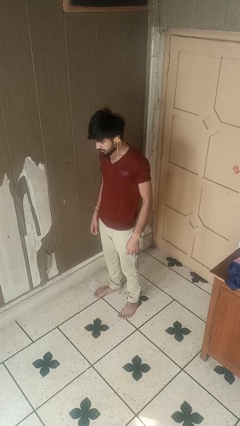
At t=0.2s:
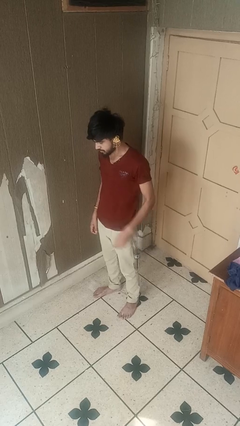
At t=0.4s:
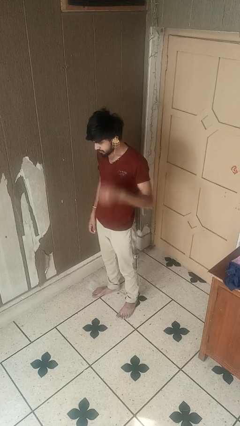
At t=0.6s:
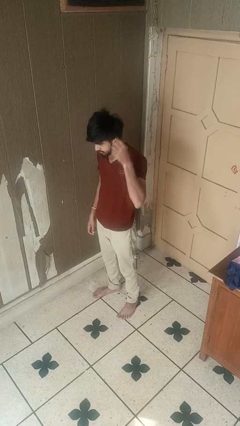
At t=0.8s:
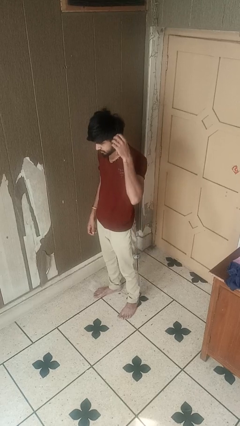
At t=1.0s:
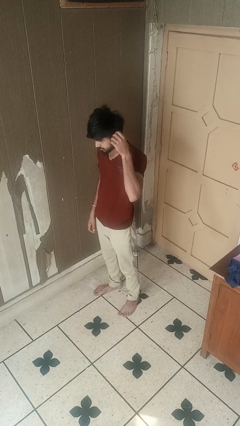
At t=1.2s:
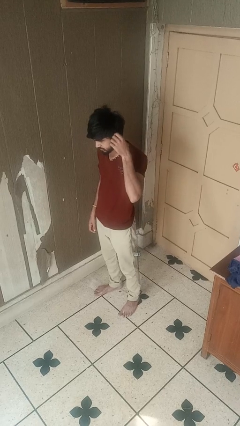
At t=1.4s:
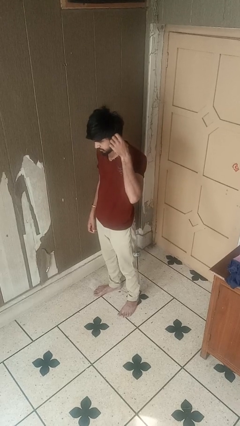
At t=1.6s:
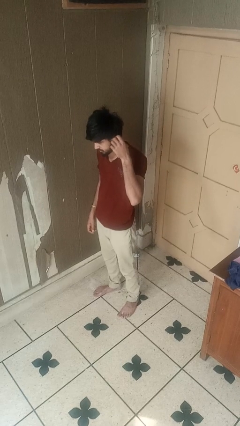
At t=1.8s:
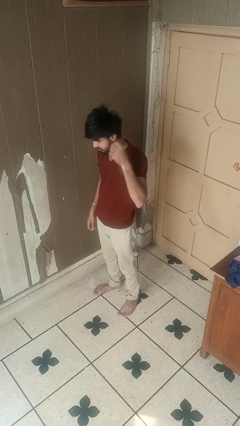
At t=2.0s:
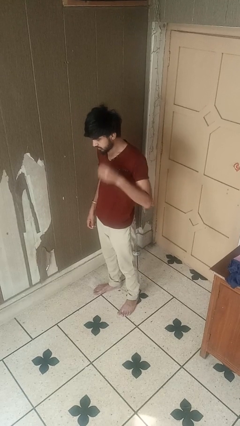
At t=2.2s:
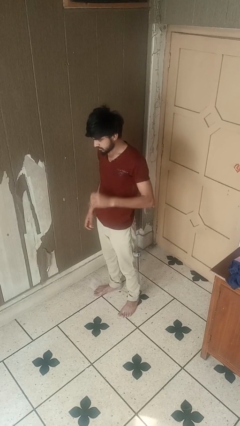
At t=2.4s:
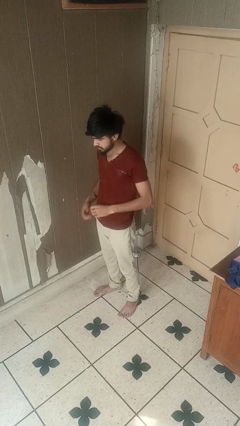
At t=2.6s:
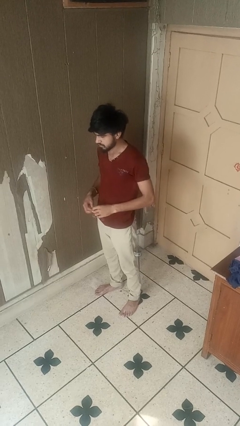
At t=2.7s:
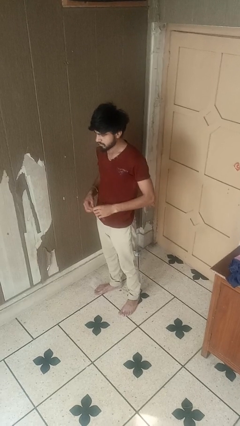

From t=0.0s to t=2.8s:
person takes off earrings

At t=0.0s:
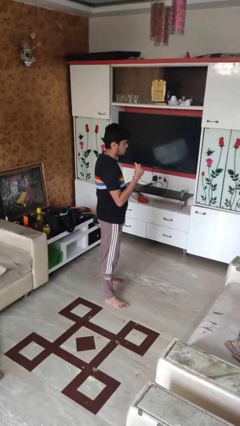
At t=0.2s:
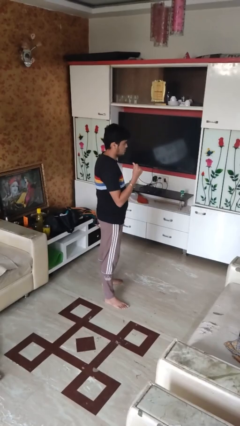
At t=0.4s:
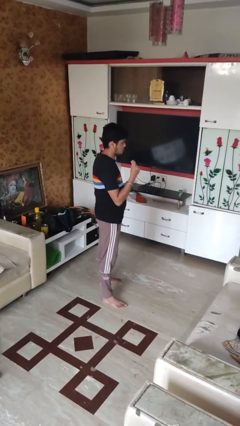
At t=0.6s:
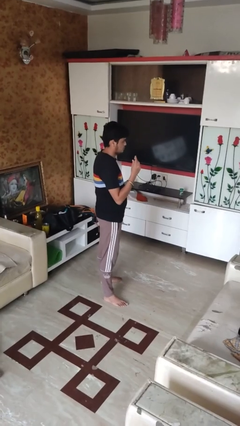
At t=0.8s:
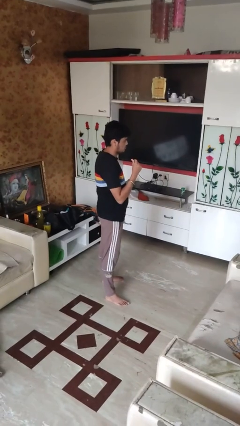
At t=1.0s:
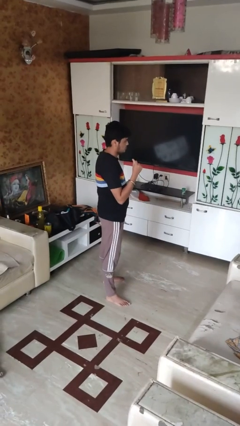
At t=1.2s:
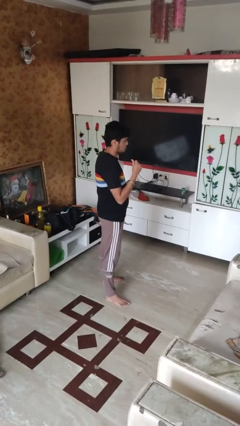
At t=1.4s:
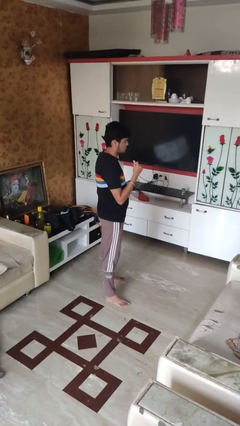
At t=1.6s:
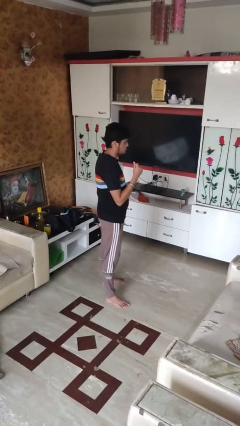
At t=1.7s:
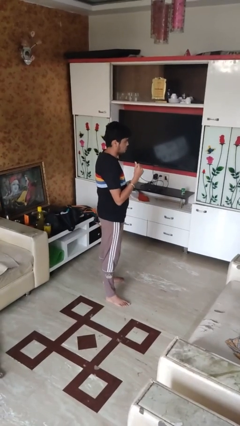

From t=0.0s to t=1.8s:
person snaps fingers

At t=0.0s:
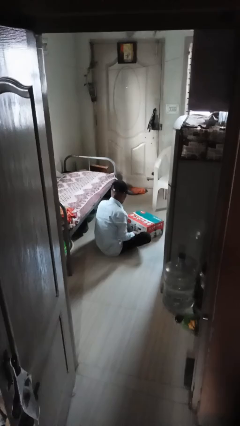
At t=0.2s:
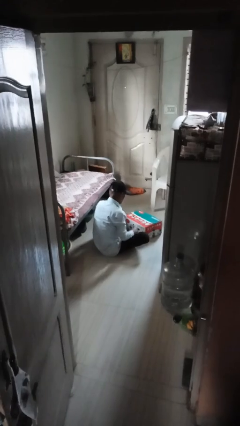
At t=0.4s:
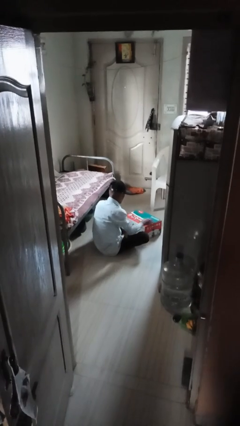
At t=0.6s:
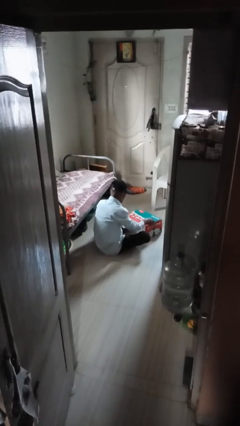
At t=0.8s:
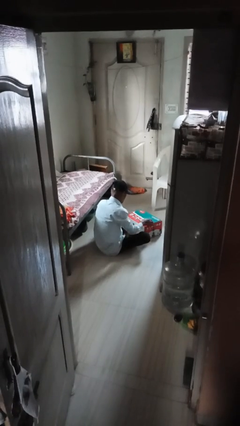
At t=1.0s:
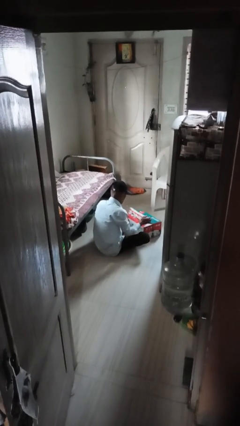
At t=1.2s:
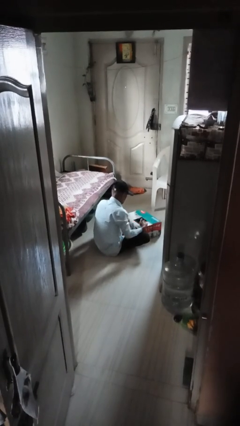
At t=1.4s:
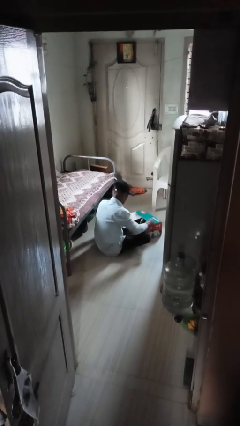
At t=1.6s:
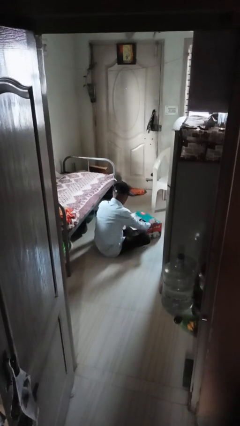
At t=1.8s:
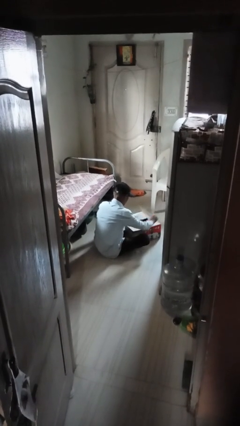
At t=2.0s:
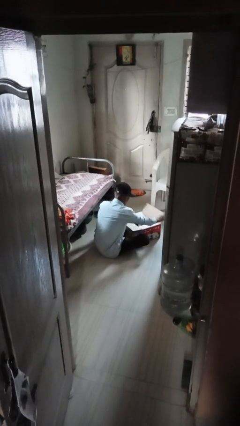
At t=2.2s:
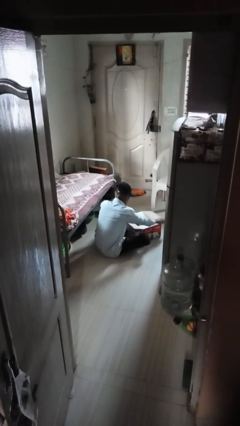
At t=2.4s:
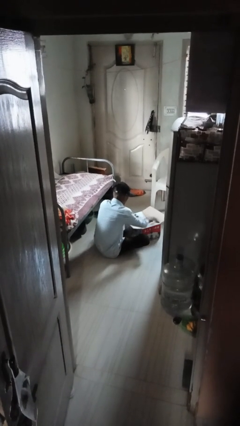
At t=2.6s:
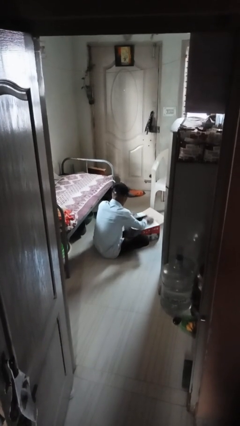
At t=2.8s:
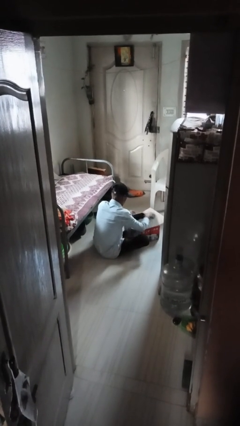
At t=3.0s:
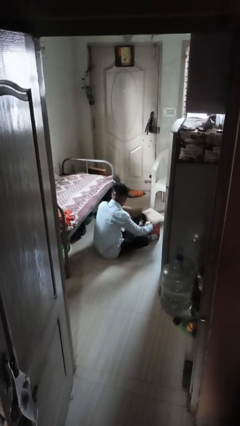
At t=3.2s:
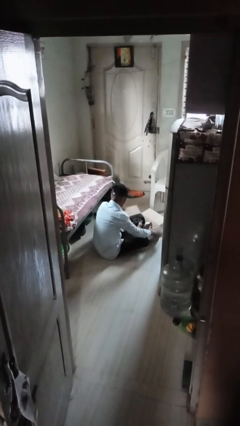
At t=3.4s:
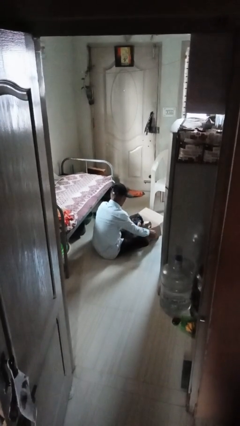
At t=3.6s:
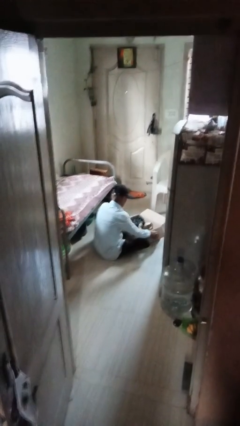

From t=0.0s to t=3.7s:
person opens box

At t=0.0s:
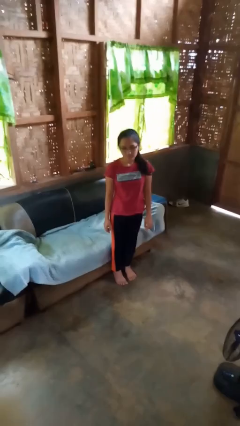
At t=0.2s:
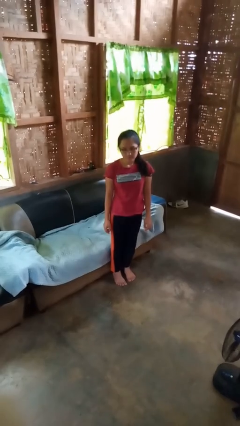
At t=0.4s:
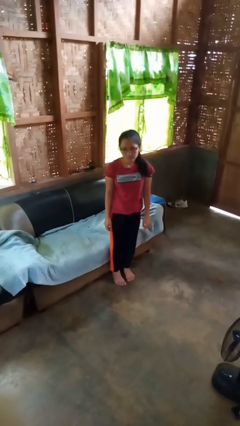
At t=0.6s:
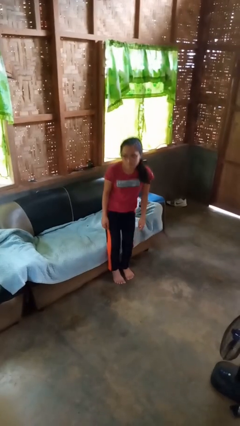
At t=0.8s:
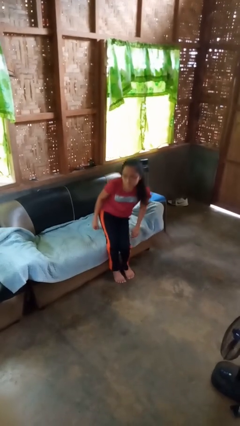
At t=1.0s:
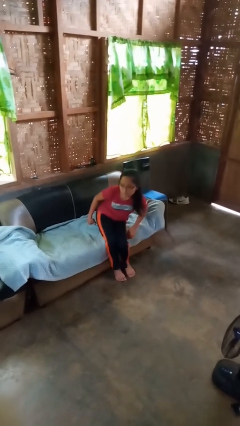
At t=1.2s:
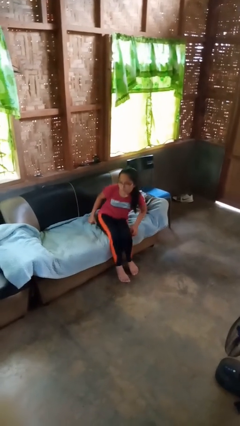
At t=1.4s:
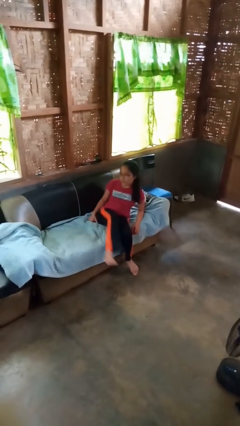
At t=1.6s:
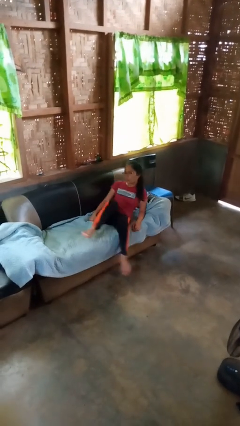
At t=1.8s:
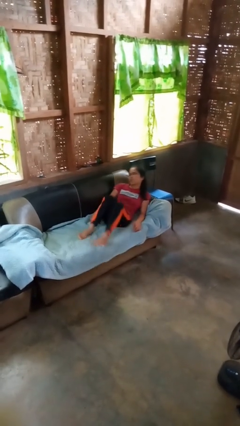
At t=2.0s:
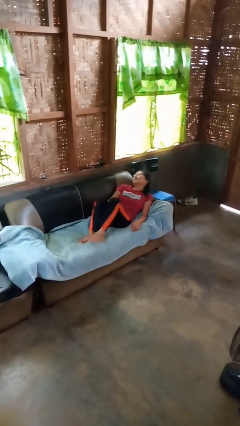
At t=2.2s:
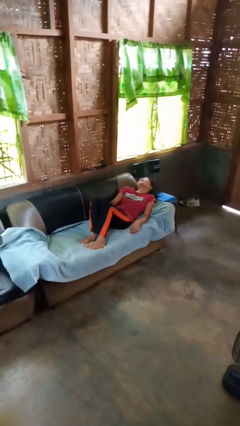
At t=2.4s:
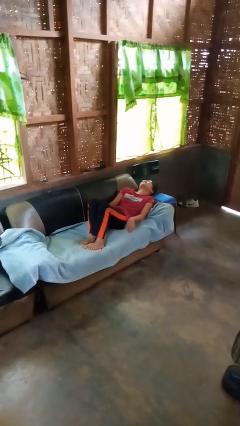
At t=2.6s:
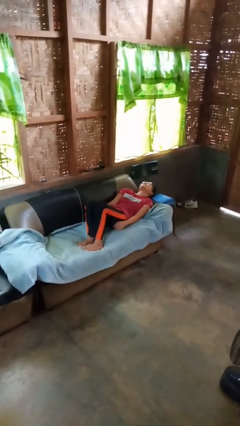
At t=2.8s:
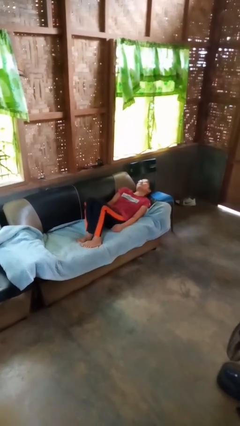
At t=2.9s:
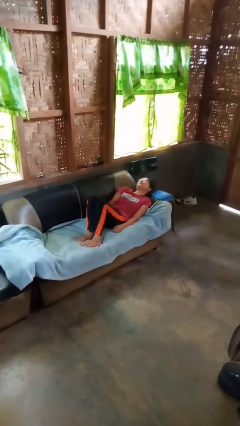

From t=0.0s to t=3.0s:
person lies down on couch

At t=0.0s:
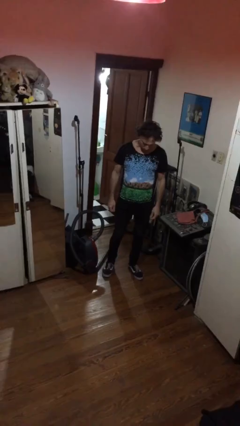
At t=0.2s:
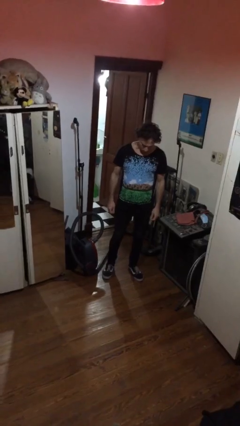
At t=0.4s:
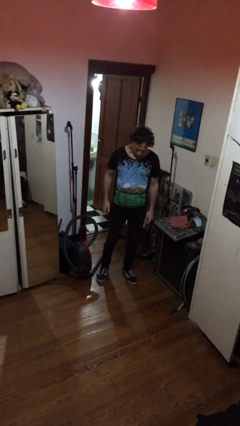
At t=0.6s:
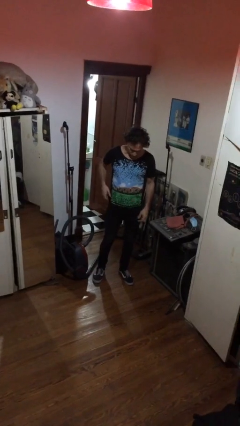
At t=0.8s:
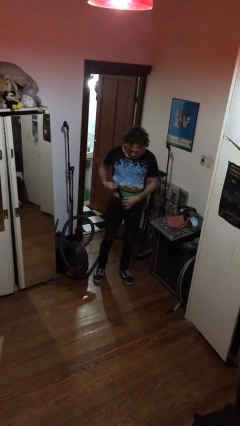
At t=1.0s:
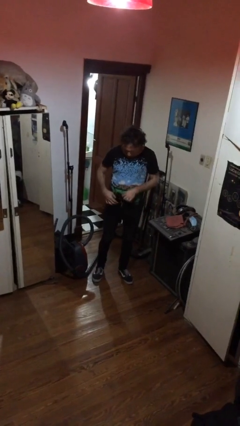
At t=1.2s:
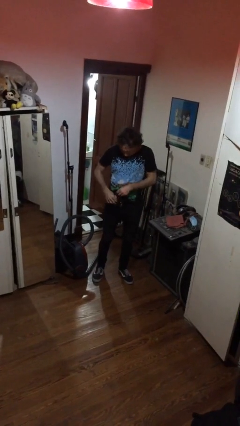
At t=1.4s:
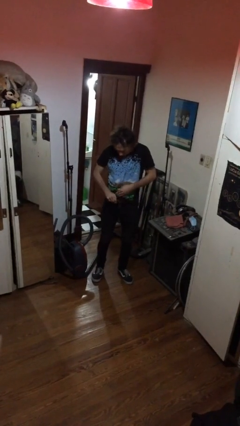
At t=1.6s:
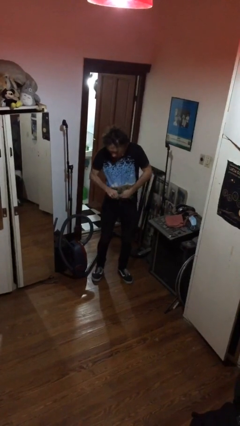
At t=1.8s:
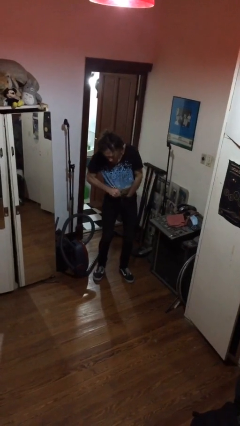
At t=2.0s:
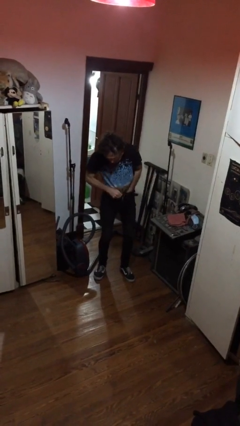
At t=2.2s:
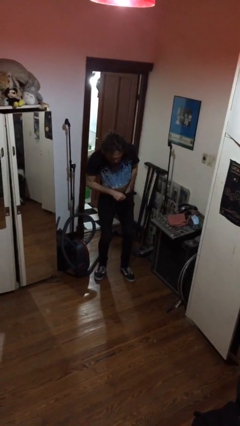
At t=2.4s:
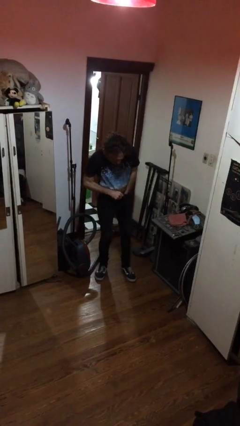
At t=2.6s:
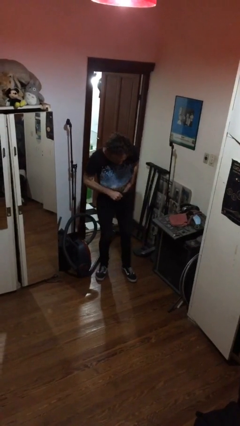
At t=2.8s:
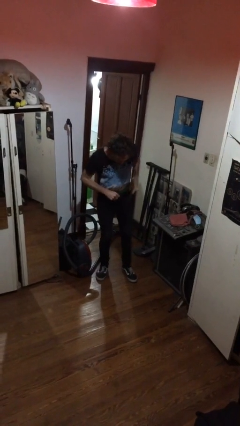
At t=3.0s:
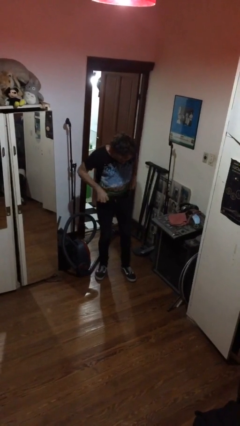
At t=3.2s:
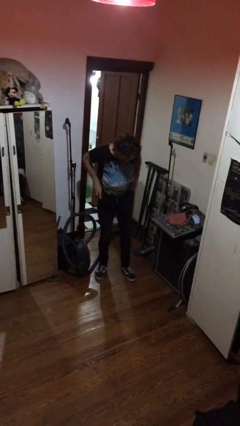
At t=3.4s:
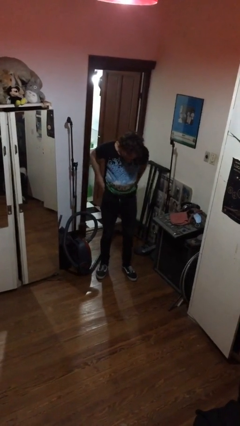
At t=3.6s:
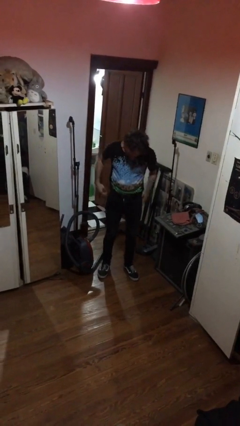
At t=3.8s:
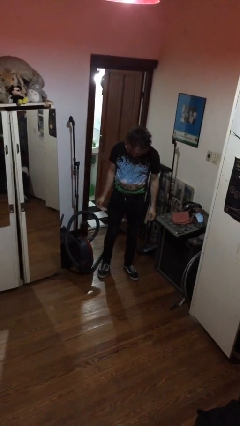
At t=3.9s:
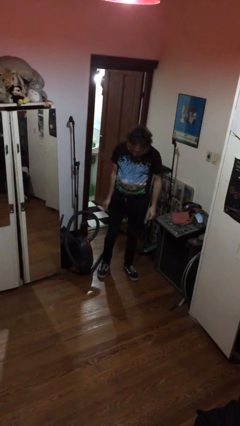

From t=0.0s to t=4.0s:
person tucks in shirt

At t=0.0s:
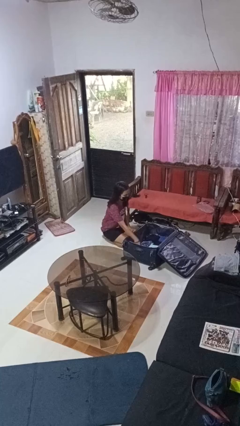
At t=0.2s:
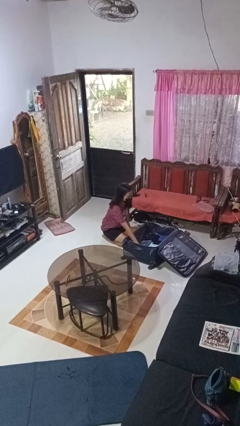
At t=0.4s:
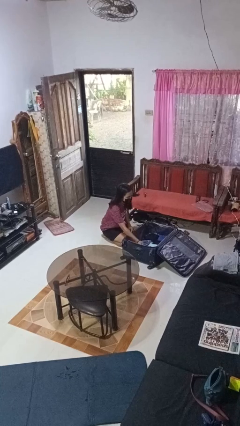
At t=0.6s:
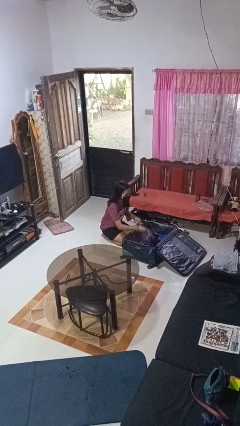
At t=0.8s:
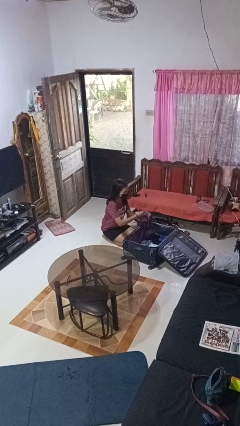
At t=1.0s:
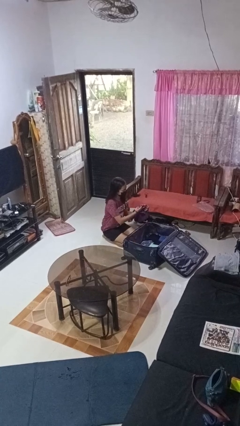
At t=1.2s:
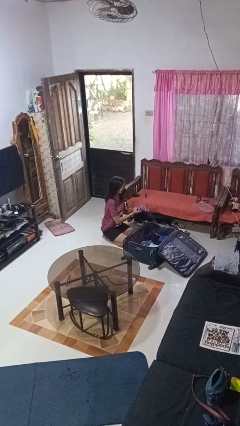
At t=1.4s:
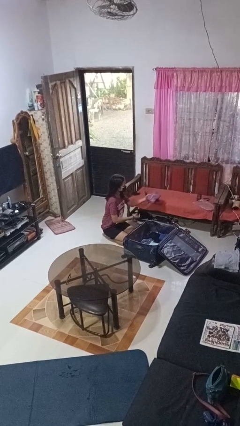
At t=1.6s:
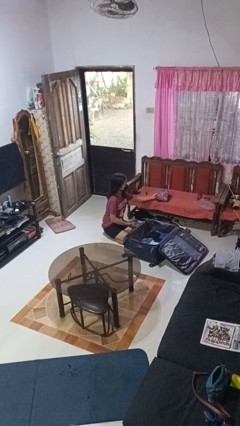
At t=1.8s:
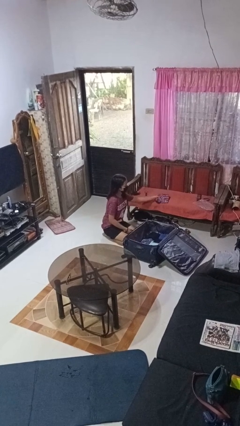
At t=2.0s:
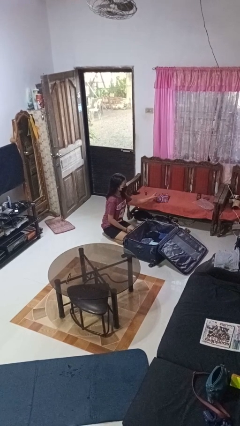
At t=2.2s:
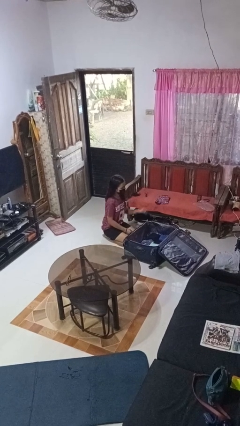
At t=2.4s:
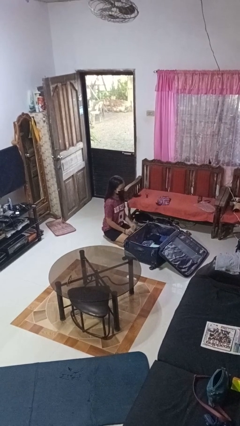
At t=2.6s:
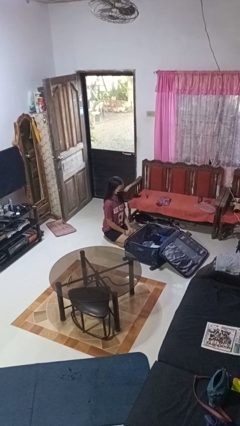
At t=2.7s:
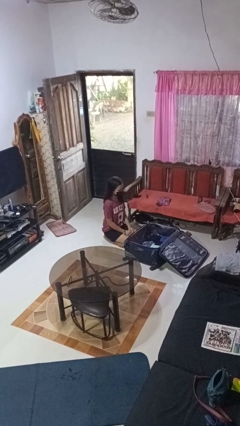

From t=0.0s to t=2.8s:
person unloads clothes from suitcase
